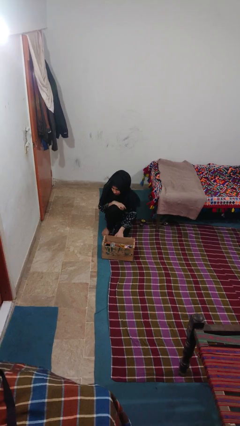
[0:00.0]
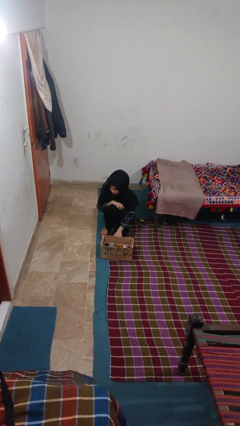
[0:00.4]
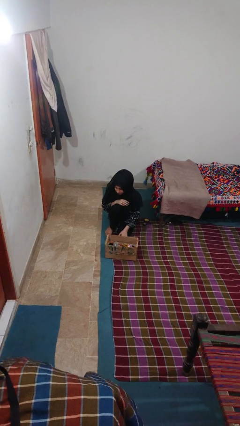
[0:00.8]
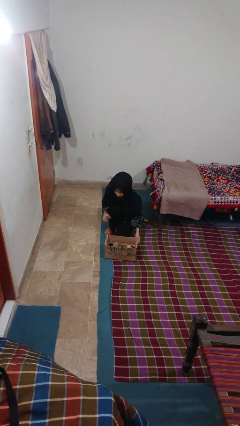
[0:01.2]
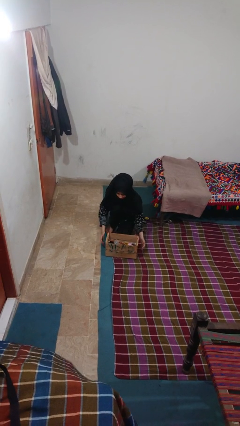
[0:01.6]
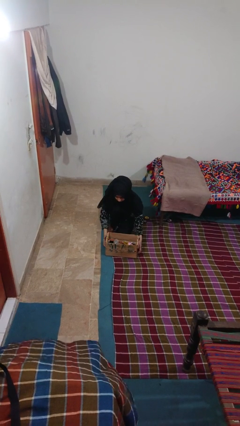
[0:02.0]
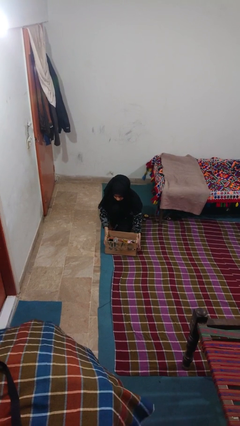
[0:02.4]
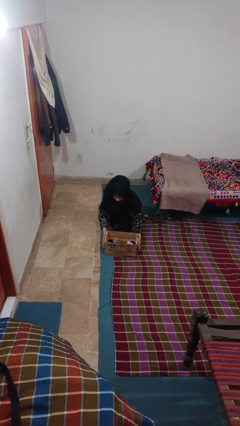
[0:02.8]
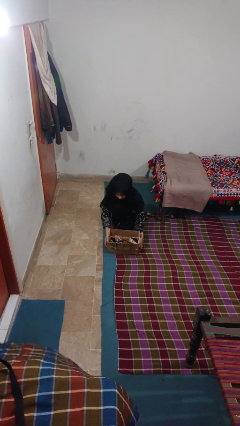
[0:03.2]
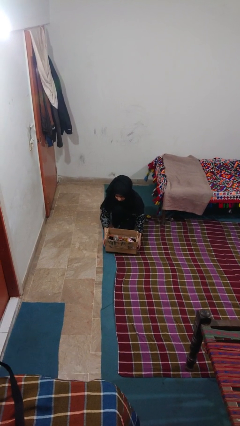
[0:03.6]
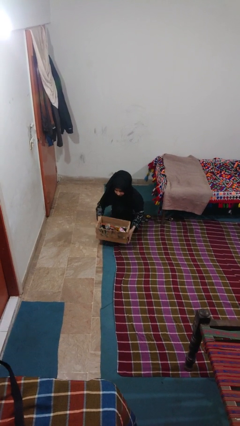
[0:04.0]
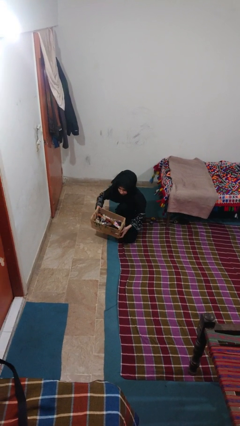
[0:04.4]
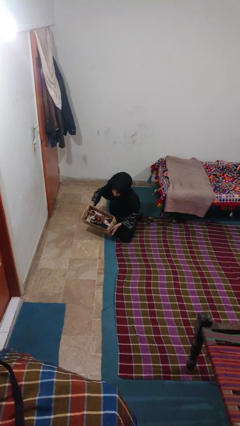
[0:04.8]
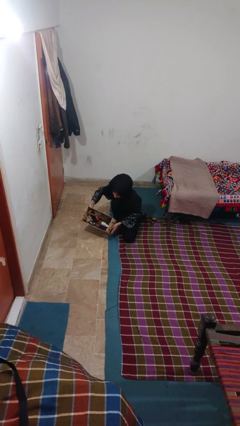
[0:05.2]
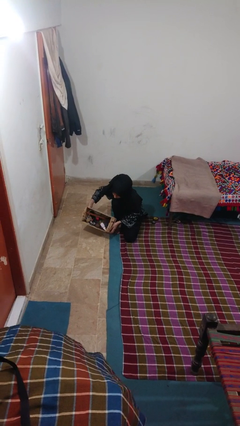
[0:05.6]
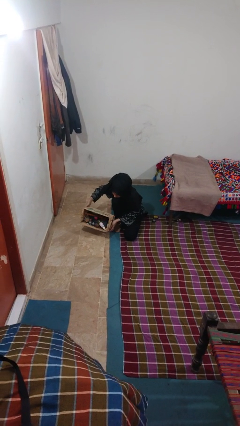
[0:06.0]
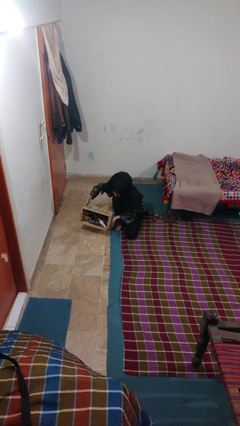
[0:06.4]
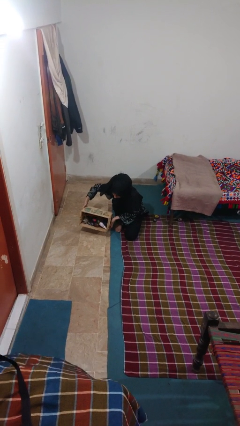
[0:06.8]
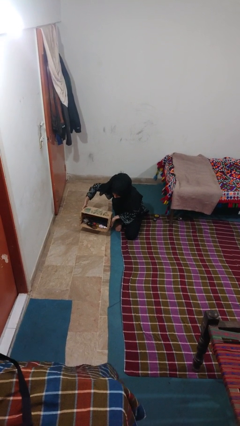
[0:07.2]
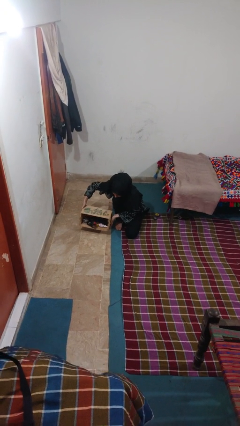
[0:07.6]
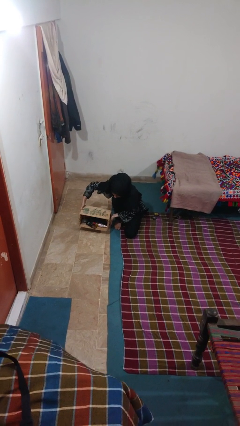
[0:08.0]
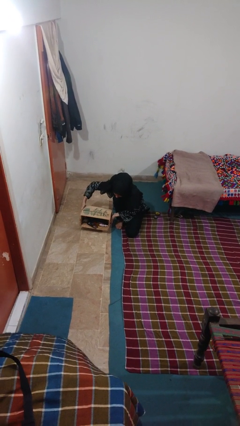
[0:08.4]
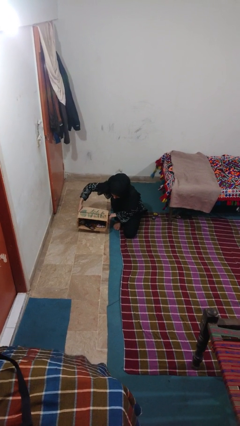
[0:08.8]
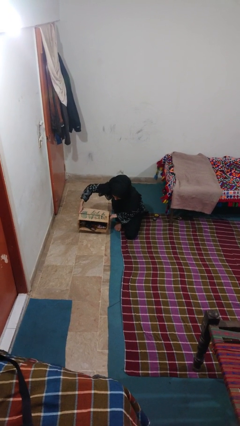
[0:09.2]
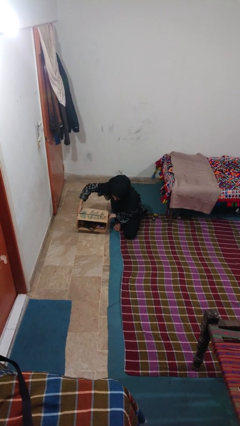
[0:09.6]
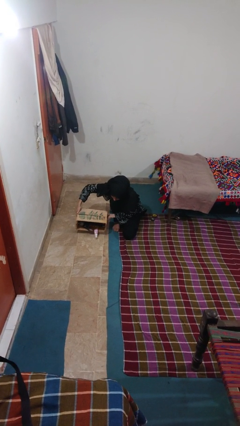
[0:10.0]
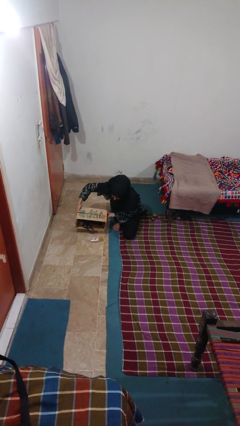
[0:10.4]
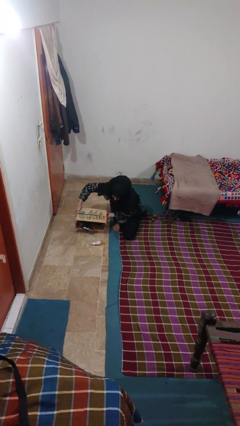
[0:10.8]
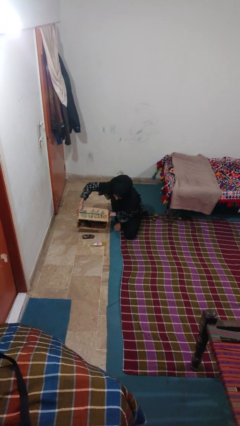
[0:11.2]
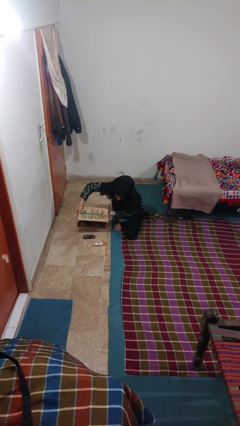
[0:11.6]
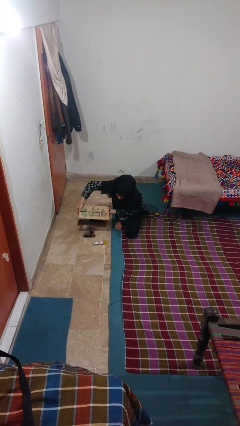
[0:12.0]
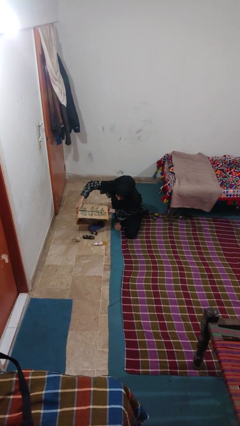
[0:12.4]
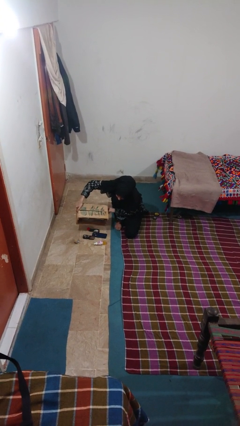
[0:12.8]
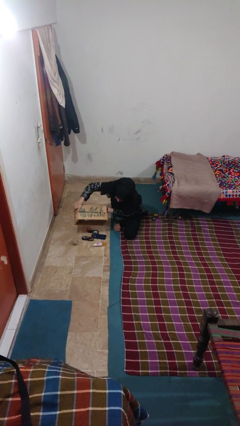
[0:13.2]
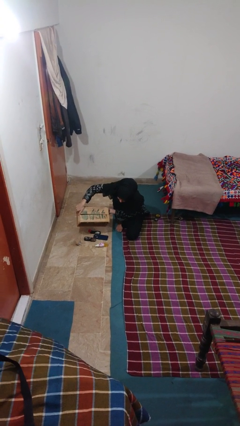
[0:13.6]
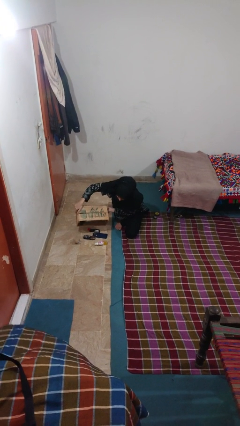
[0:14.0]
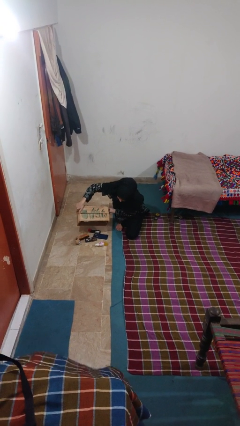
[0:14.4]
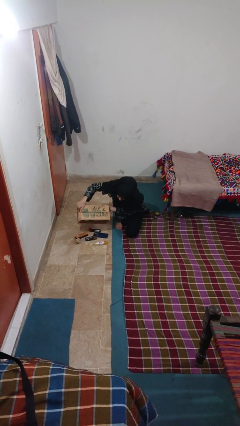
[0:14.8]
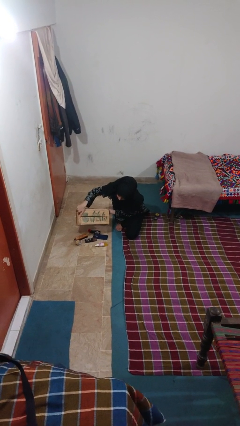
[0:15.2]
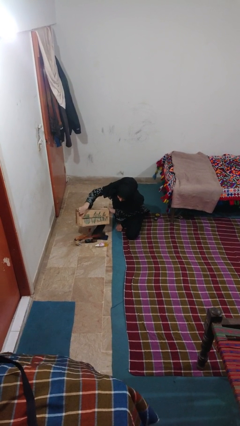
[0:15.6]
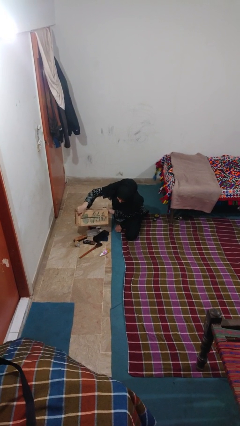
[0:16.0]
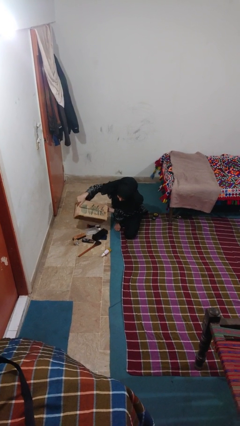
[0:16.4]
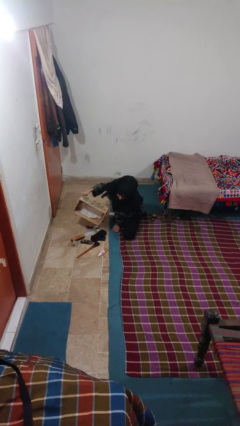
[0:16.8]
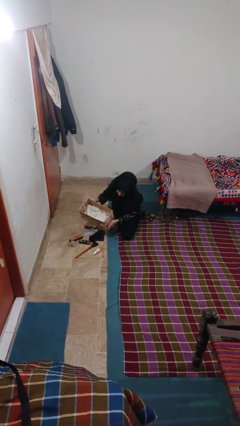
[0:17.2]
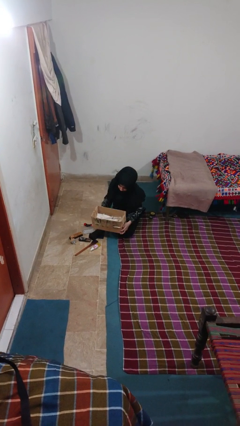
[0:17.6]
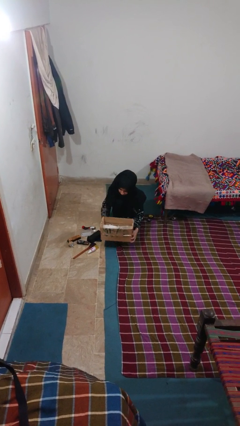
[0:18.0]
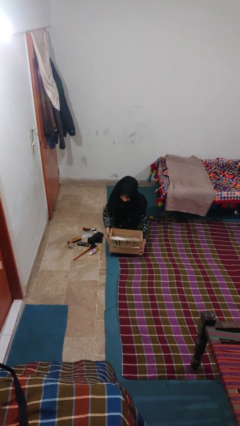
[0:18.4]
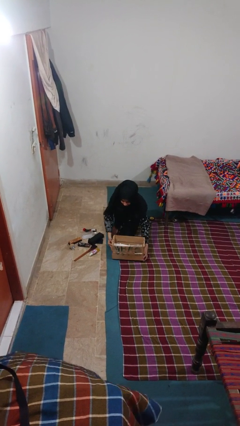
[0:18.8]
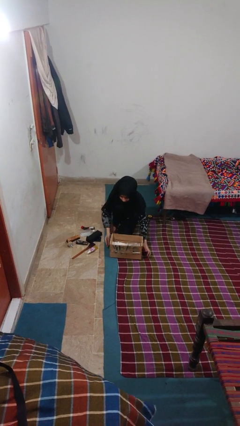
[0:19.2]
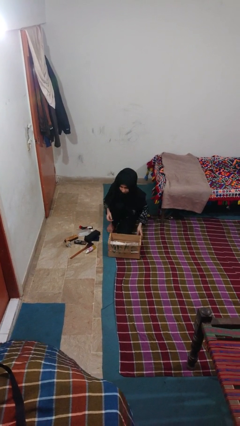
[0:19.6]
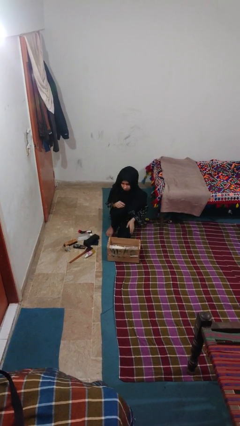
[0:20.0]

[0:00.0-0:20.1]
person unloads box onto floor

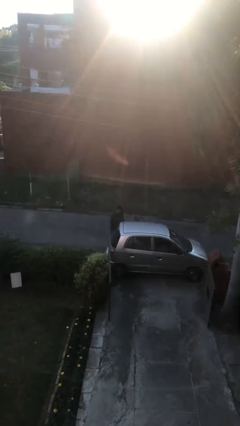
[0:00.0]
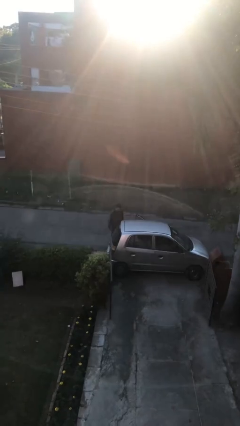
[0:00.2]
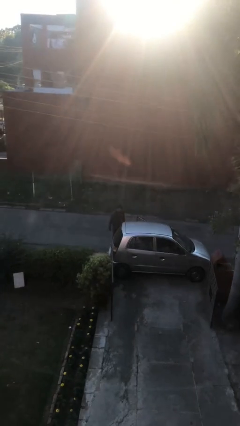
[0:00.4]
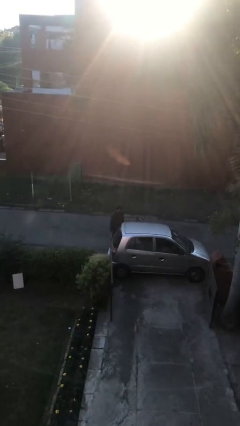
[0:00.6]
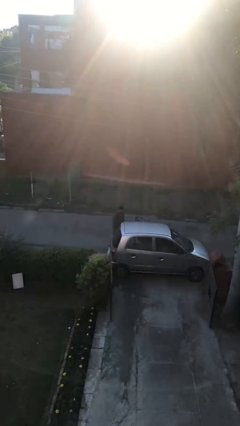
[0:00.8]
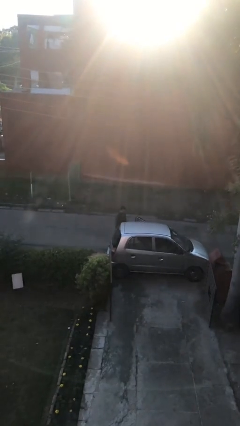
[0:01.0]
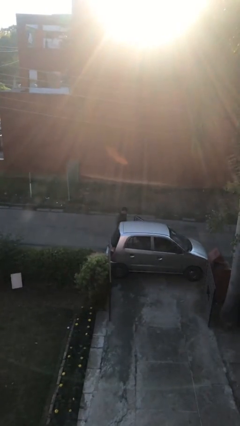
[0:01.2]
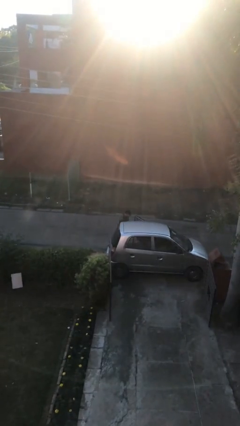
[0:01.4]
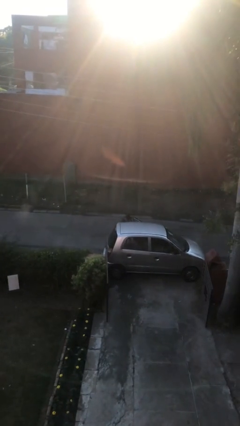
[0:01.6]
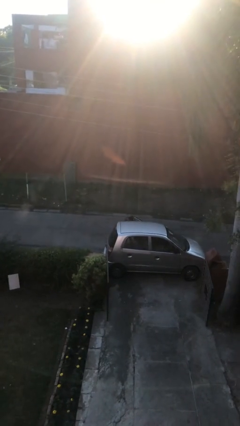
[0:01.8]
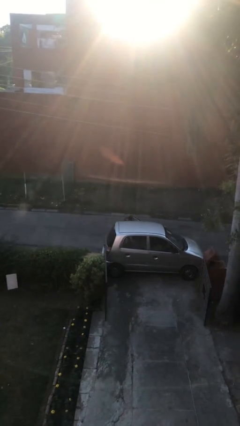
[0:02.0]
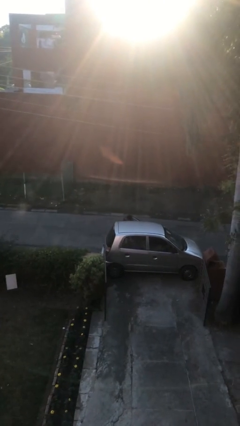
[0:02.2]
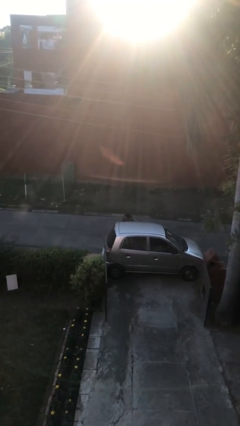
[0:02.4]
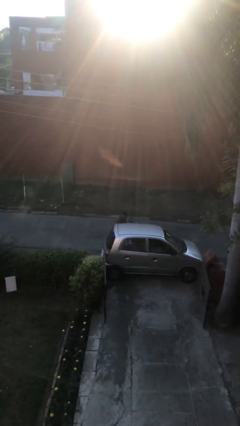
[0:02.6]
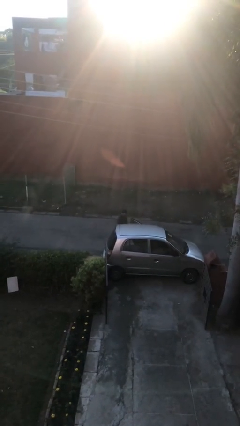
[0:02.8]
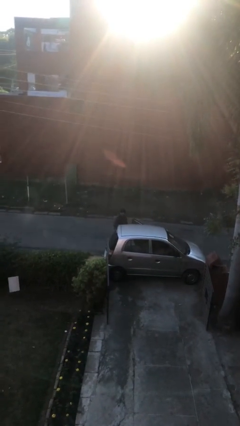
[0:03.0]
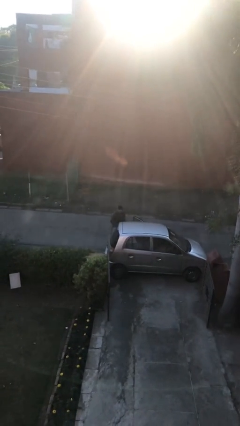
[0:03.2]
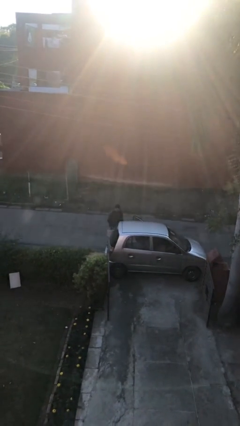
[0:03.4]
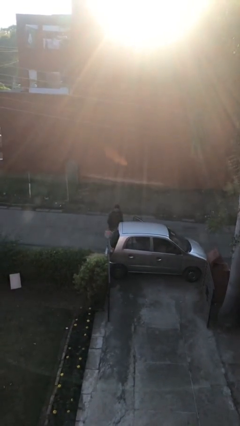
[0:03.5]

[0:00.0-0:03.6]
person unloads car

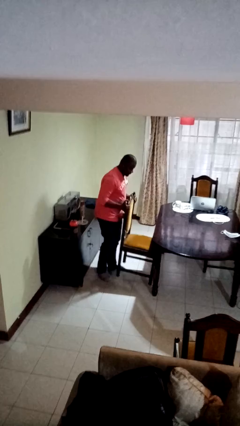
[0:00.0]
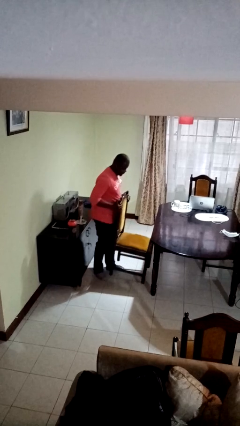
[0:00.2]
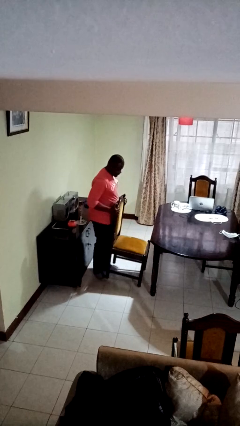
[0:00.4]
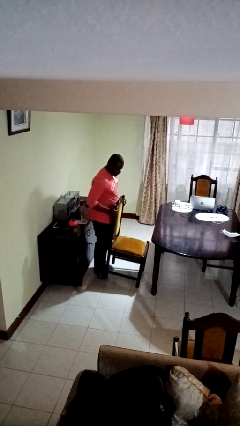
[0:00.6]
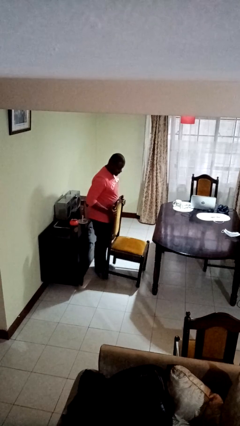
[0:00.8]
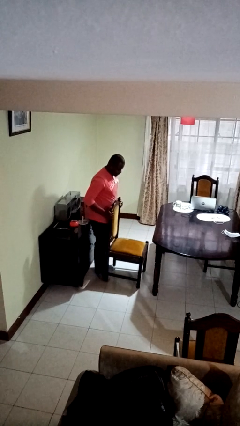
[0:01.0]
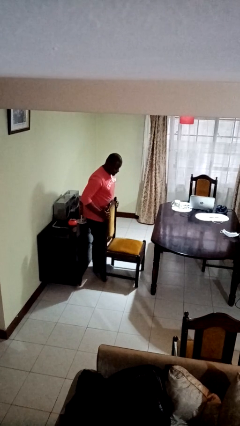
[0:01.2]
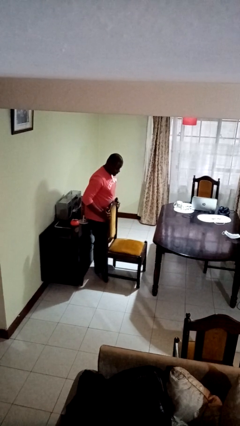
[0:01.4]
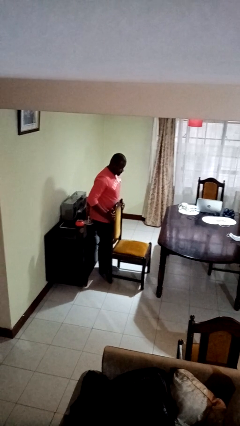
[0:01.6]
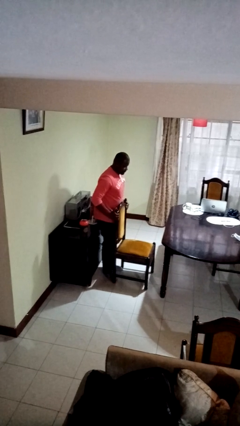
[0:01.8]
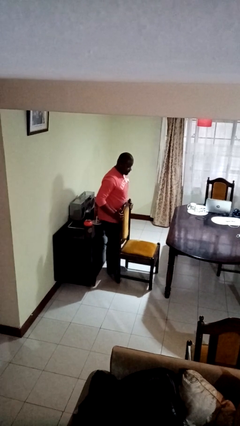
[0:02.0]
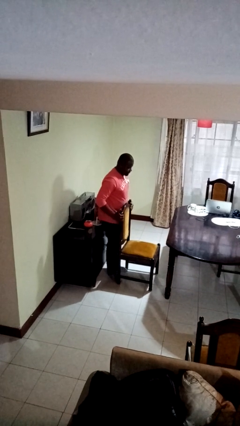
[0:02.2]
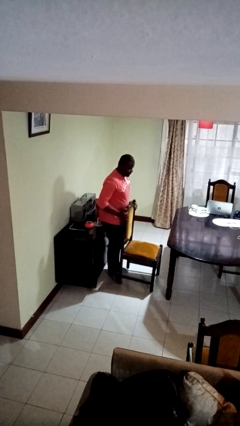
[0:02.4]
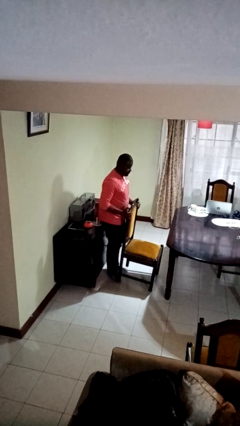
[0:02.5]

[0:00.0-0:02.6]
person pulls out chair

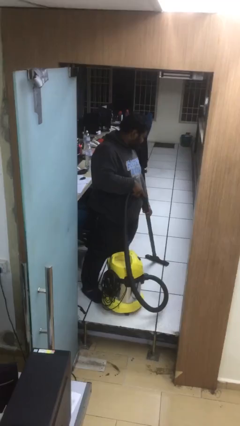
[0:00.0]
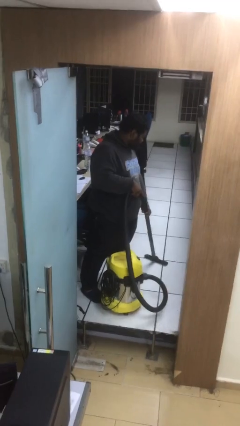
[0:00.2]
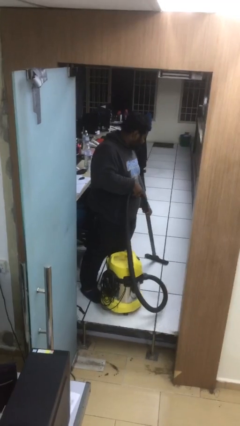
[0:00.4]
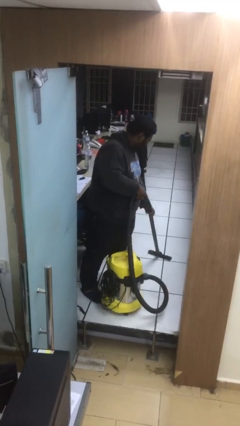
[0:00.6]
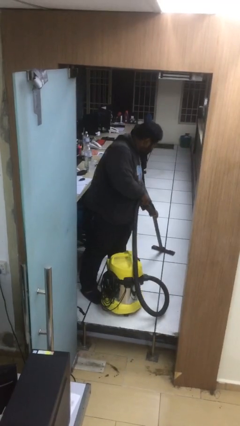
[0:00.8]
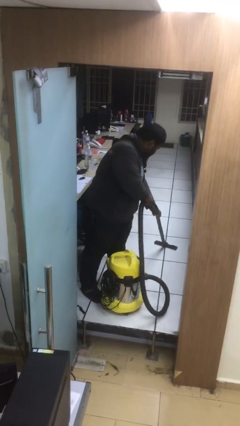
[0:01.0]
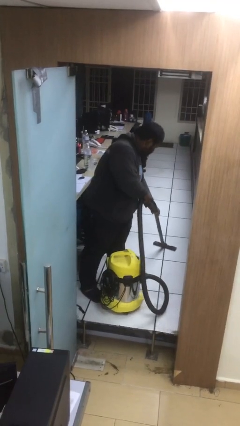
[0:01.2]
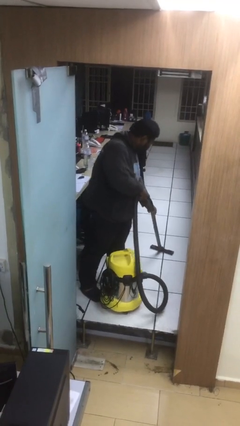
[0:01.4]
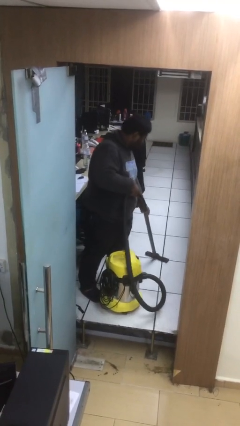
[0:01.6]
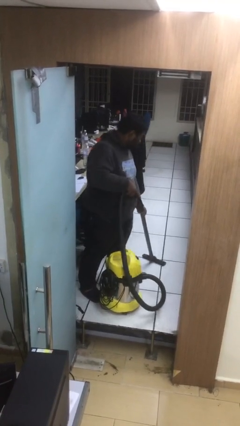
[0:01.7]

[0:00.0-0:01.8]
person vacuums carpet
